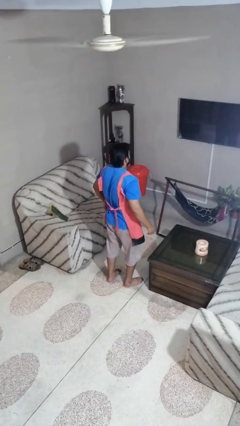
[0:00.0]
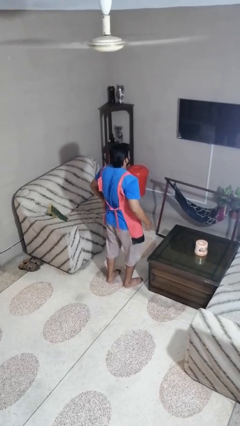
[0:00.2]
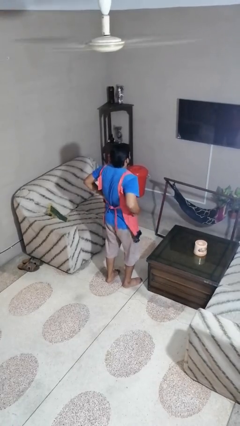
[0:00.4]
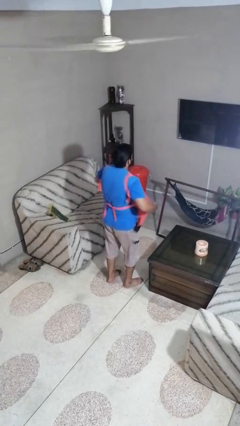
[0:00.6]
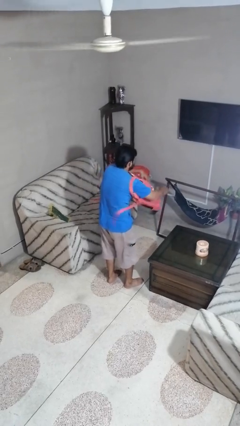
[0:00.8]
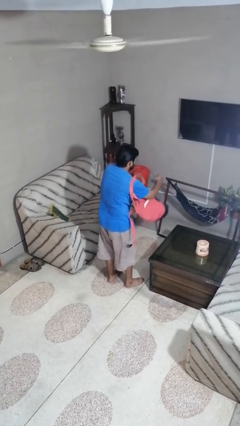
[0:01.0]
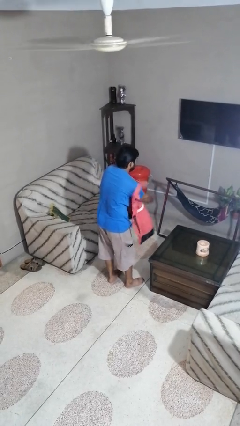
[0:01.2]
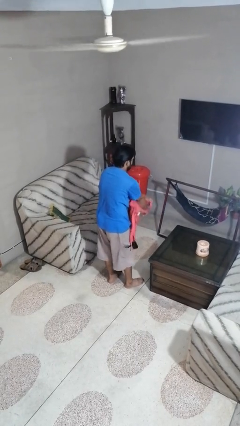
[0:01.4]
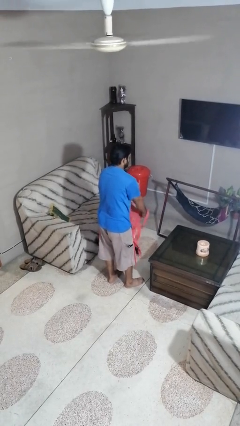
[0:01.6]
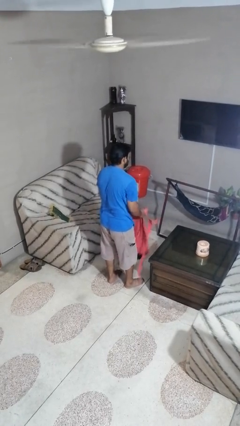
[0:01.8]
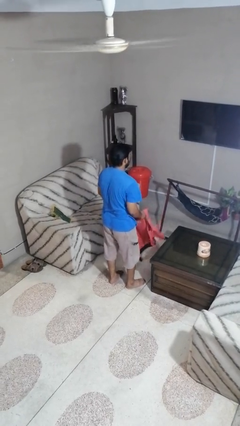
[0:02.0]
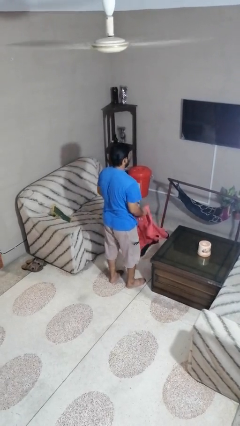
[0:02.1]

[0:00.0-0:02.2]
person takes off apron

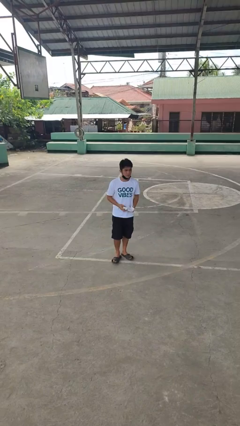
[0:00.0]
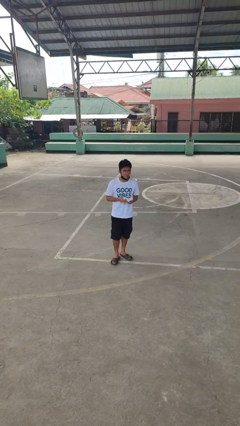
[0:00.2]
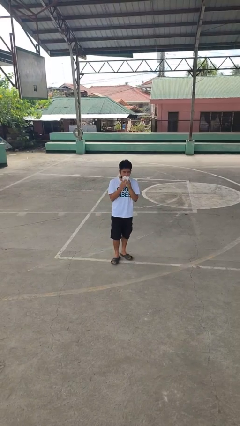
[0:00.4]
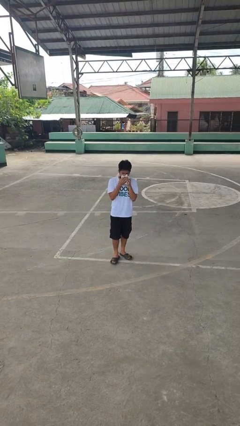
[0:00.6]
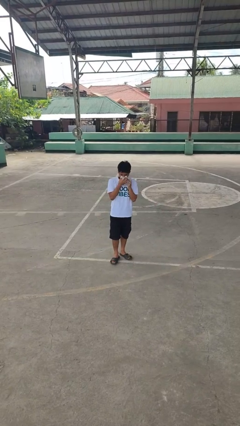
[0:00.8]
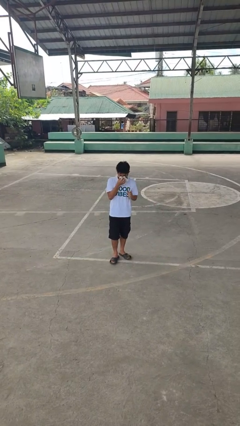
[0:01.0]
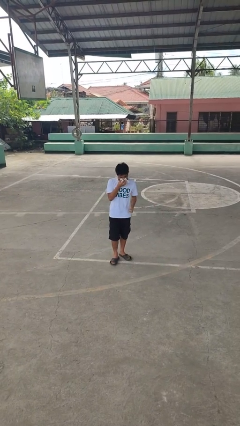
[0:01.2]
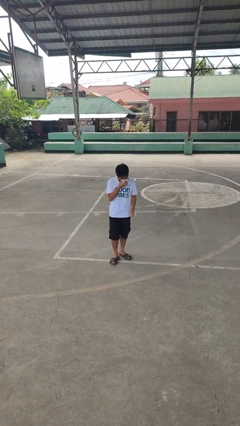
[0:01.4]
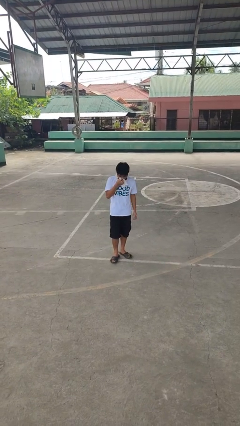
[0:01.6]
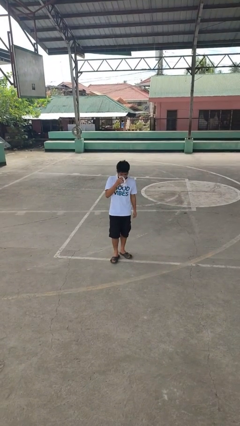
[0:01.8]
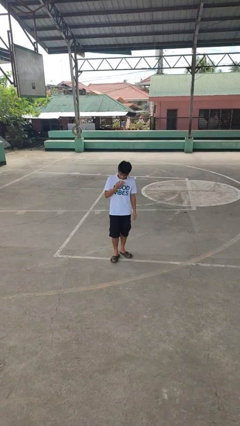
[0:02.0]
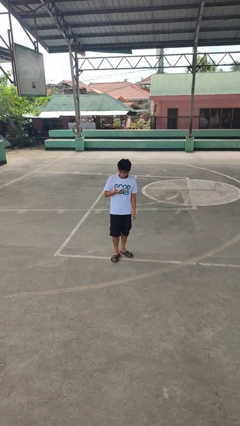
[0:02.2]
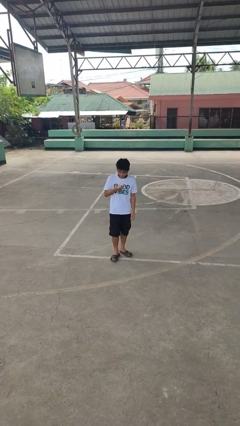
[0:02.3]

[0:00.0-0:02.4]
person blows nose

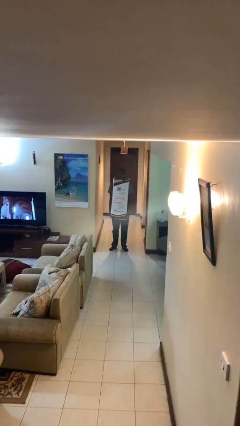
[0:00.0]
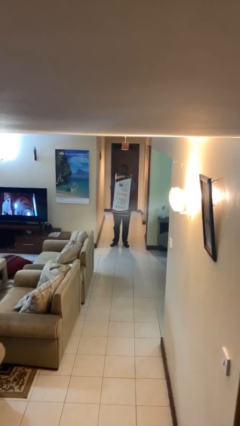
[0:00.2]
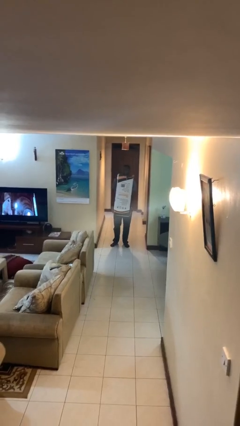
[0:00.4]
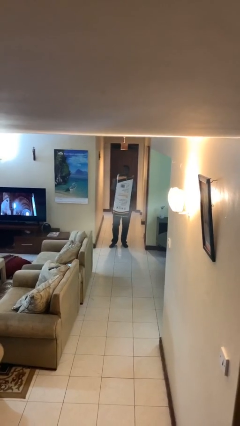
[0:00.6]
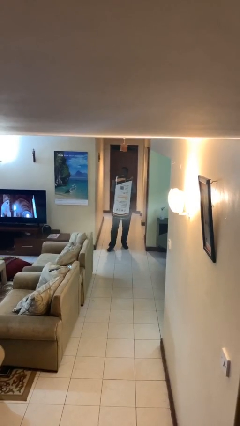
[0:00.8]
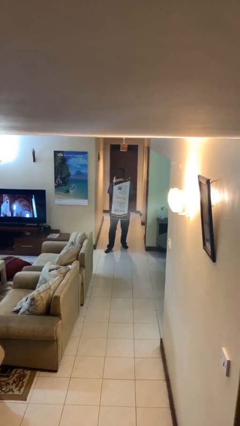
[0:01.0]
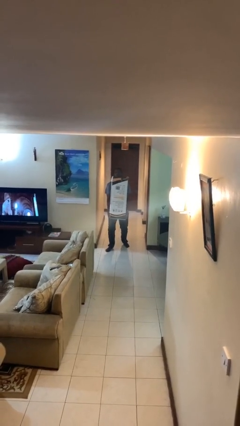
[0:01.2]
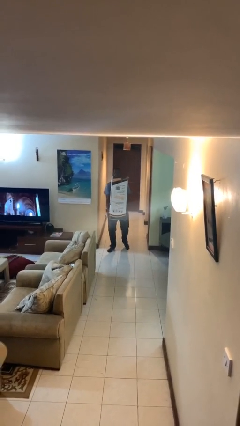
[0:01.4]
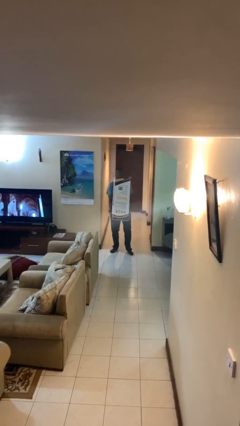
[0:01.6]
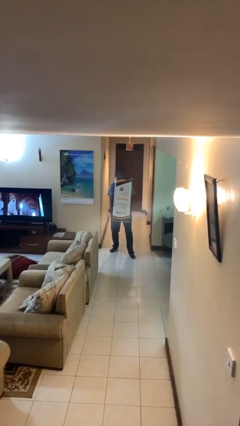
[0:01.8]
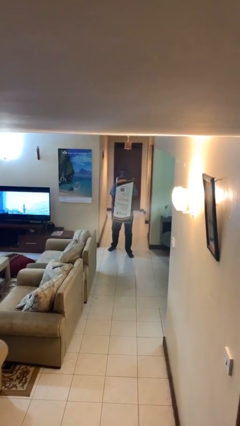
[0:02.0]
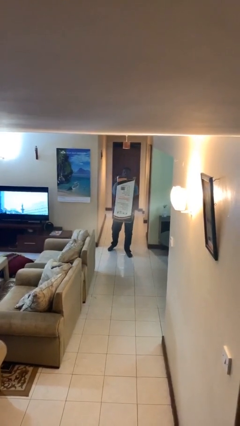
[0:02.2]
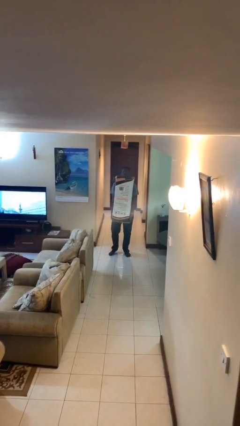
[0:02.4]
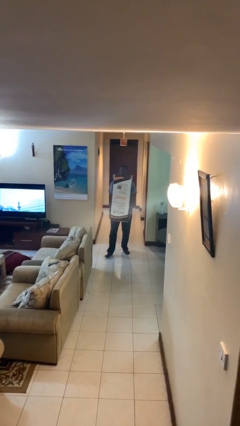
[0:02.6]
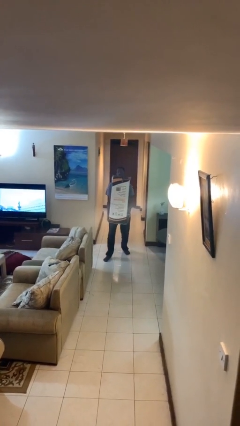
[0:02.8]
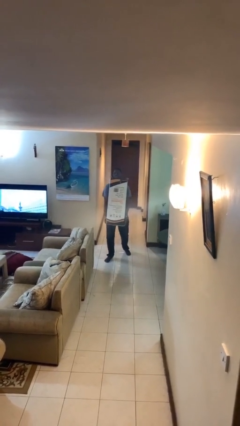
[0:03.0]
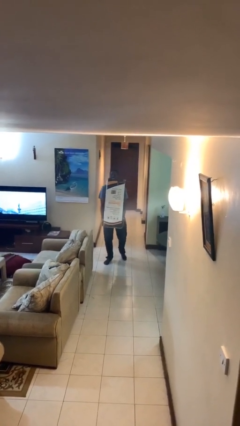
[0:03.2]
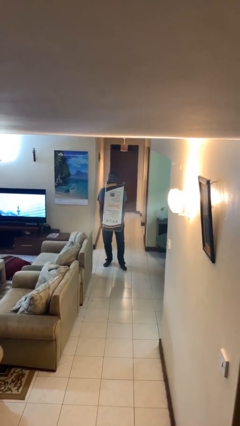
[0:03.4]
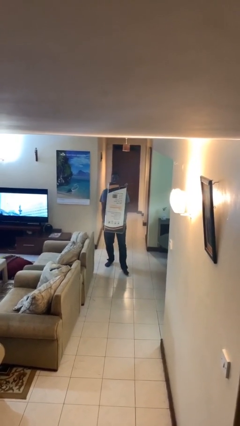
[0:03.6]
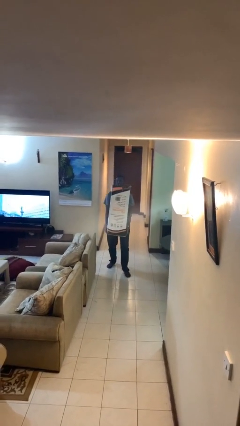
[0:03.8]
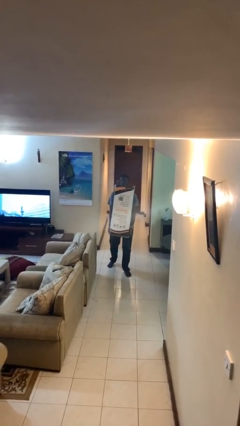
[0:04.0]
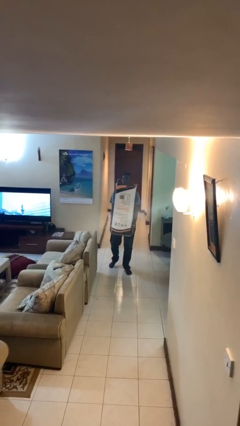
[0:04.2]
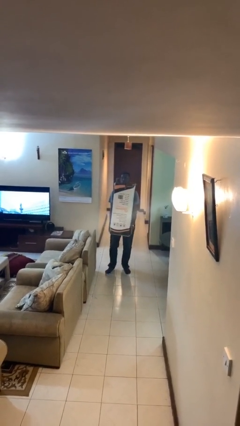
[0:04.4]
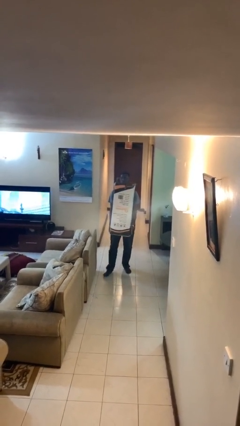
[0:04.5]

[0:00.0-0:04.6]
person carries heavy object

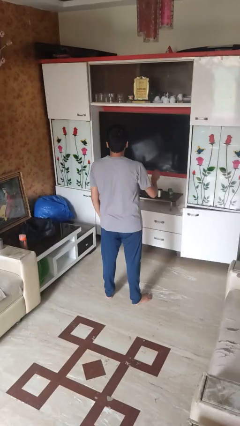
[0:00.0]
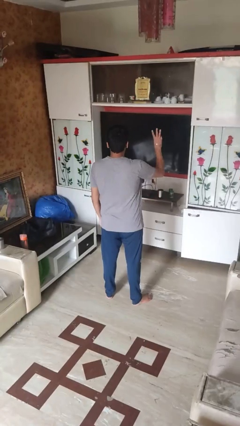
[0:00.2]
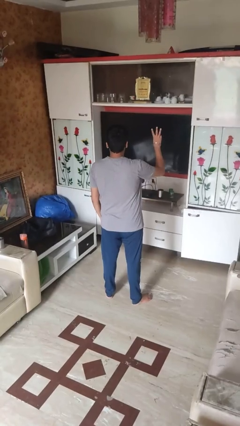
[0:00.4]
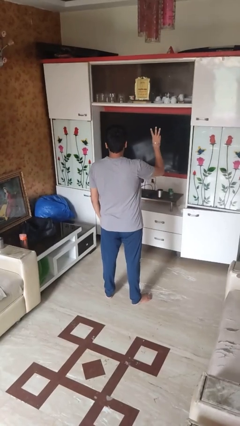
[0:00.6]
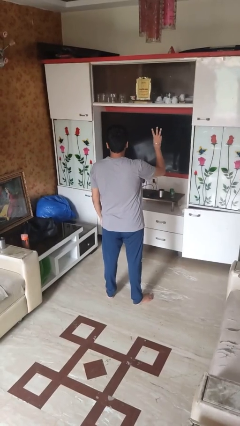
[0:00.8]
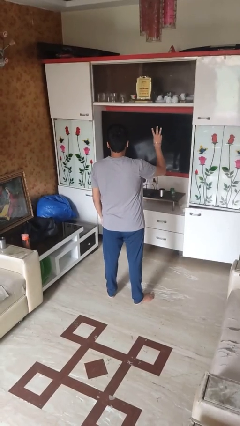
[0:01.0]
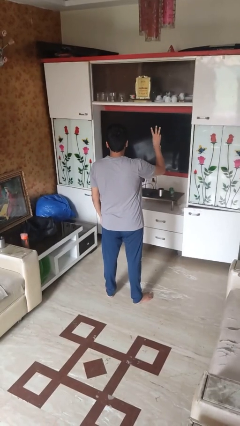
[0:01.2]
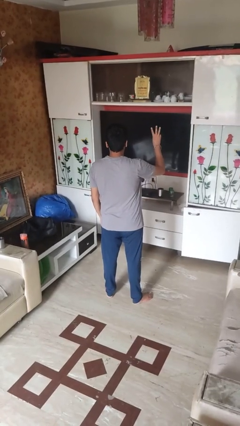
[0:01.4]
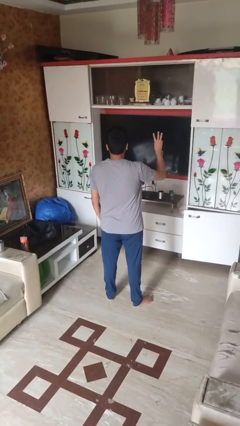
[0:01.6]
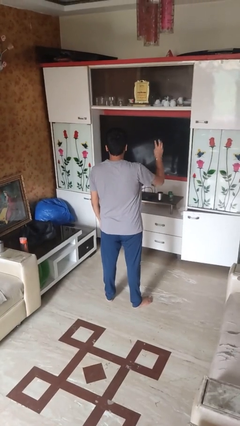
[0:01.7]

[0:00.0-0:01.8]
person gestures number three

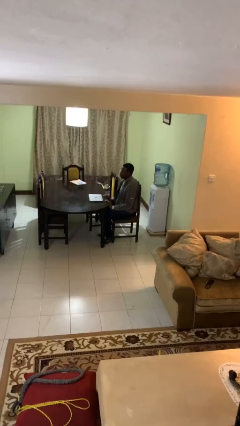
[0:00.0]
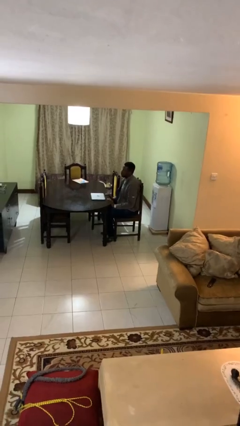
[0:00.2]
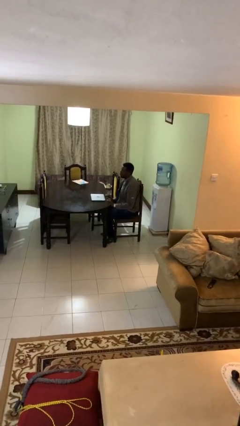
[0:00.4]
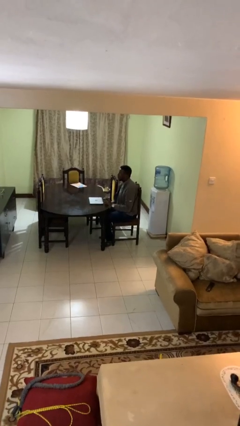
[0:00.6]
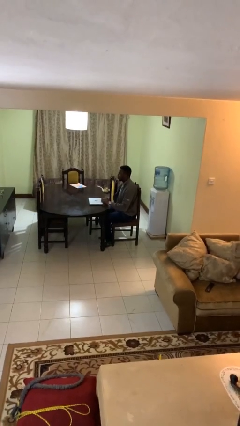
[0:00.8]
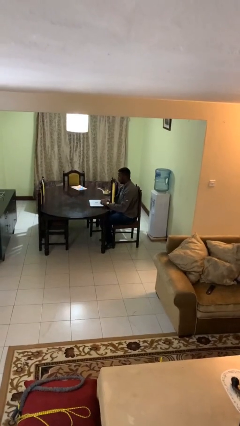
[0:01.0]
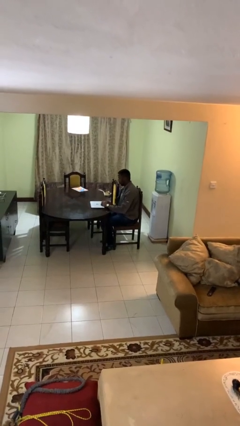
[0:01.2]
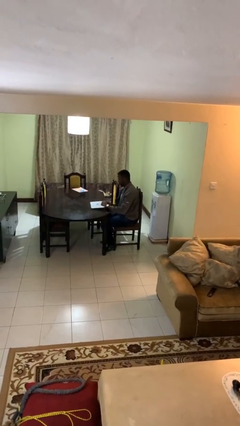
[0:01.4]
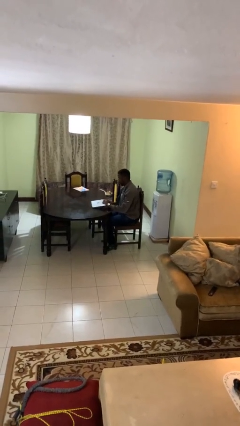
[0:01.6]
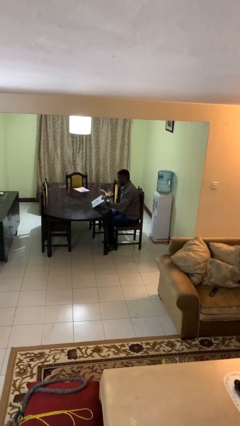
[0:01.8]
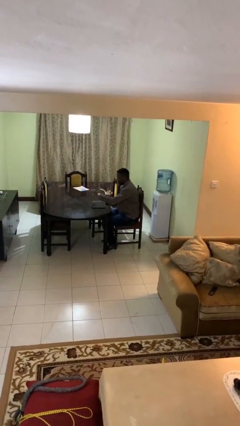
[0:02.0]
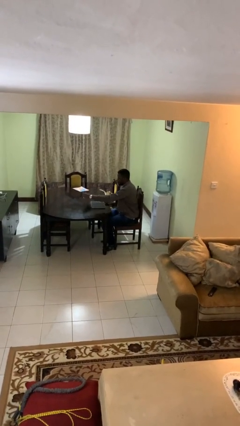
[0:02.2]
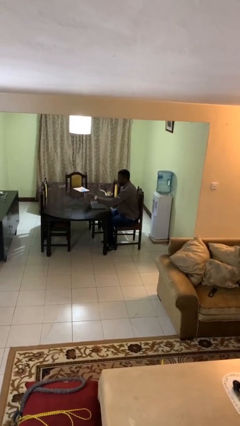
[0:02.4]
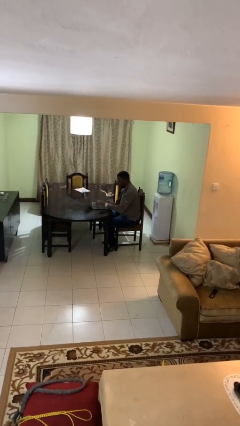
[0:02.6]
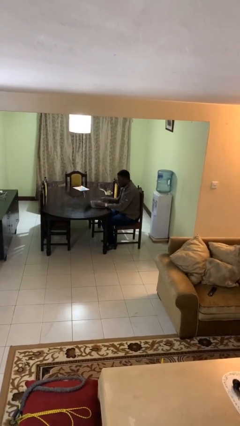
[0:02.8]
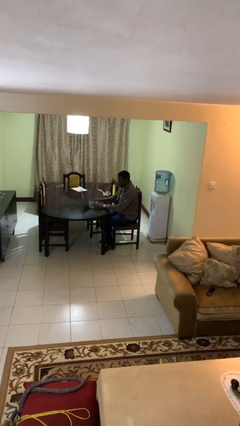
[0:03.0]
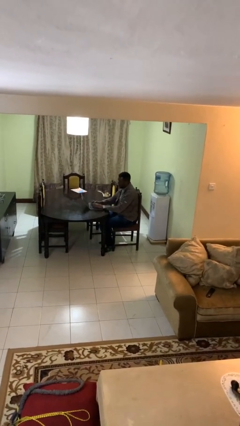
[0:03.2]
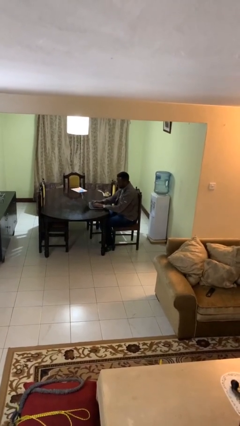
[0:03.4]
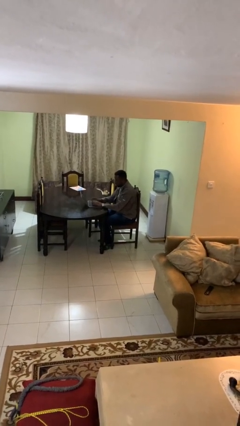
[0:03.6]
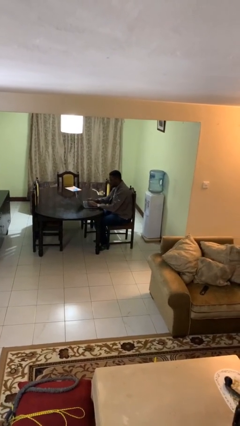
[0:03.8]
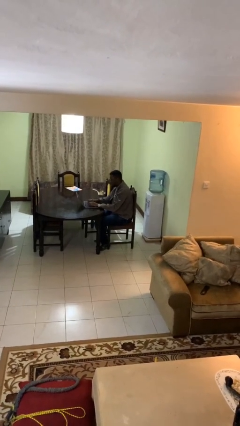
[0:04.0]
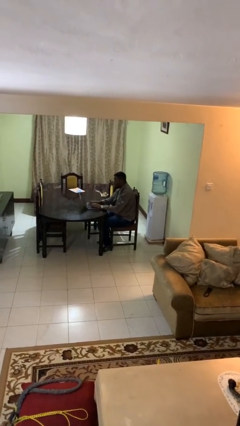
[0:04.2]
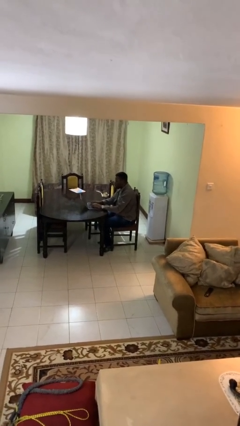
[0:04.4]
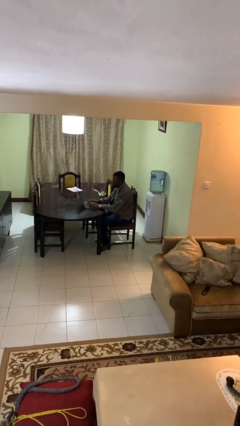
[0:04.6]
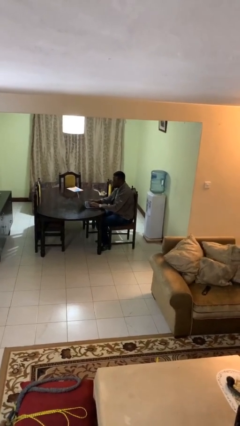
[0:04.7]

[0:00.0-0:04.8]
person interacts with laptop

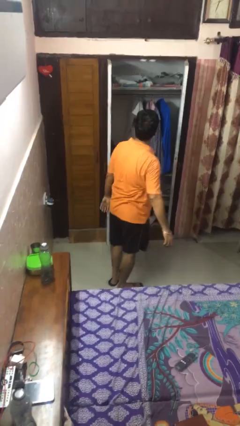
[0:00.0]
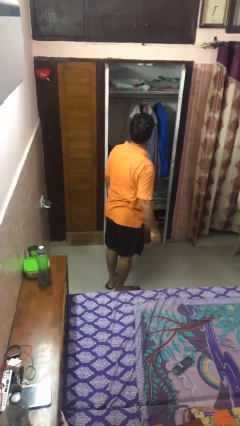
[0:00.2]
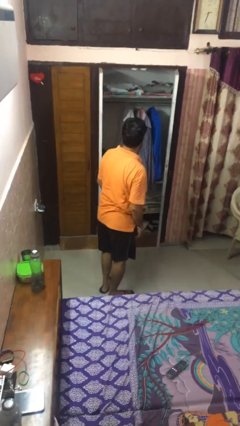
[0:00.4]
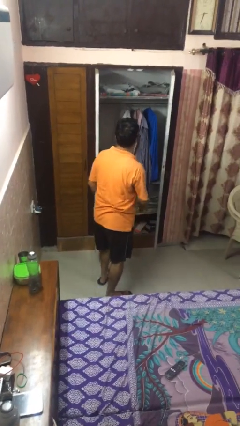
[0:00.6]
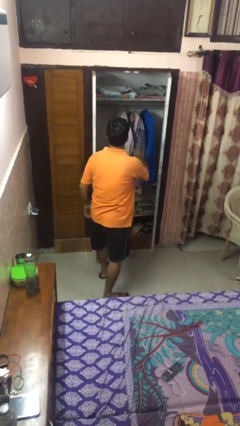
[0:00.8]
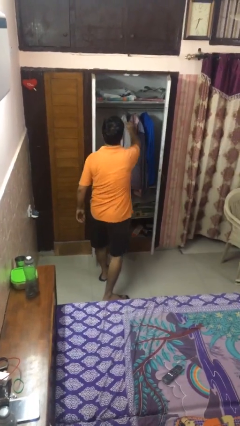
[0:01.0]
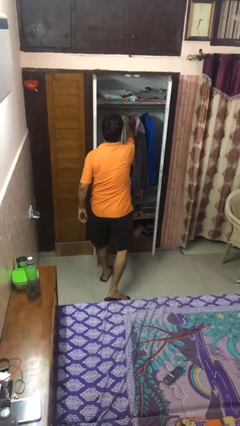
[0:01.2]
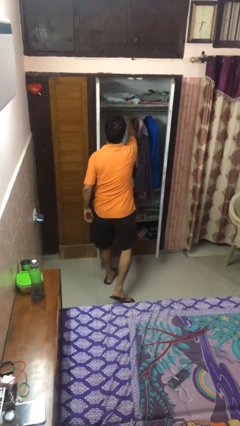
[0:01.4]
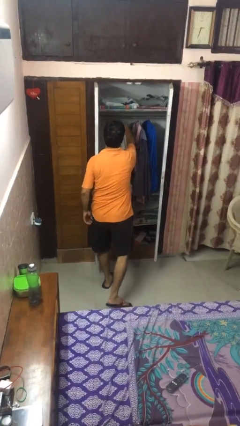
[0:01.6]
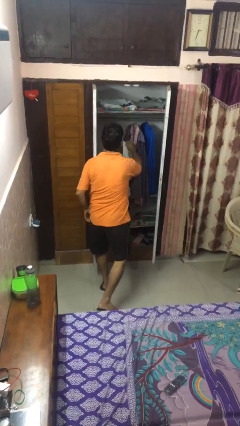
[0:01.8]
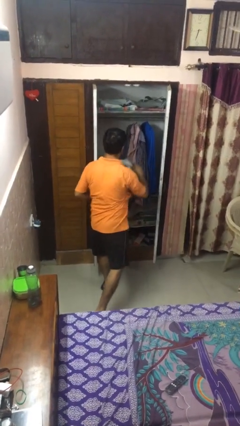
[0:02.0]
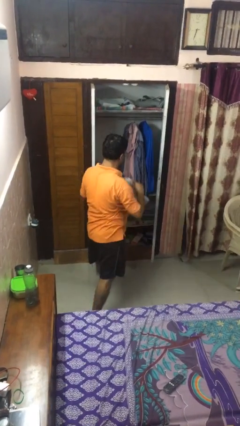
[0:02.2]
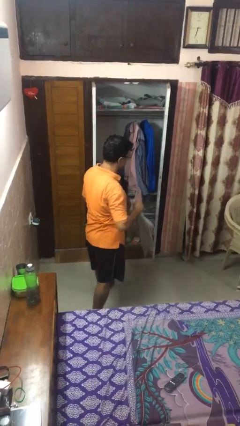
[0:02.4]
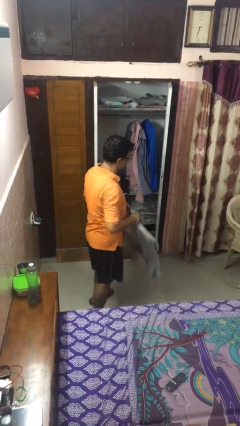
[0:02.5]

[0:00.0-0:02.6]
person takes clothes from closet
